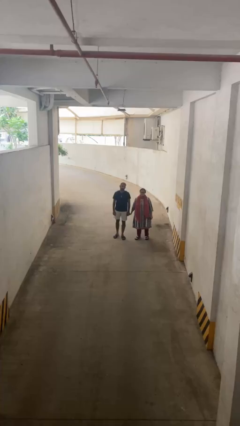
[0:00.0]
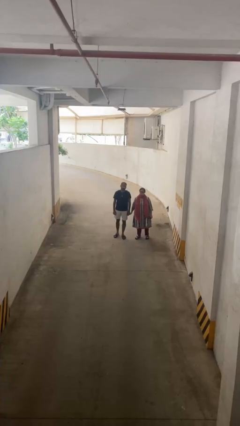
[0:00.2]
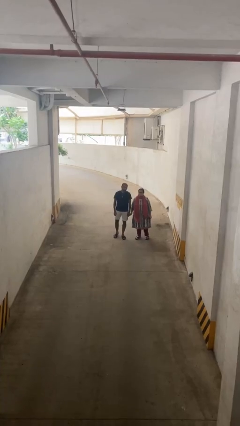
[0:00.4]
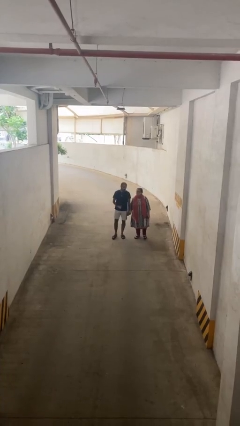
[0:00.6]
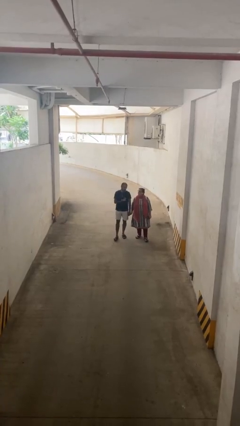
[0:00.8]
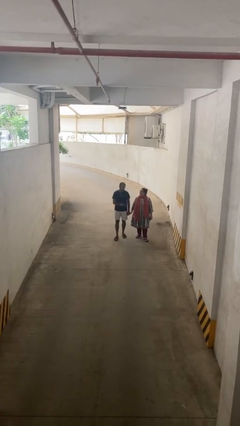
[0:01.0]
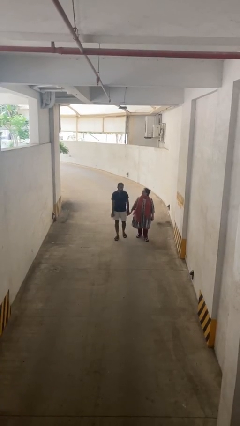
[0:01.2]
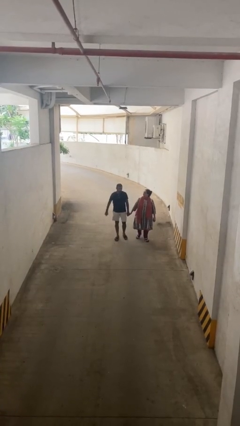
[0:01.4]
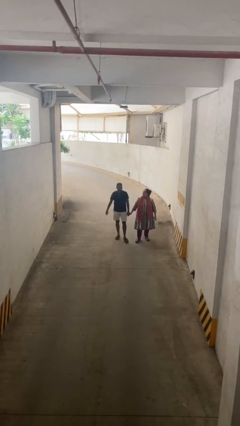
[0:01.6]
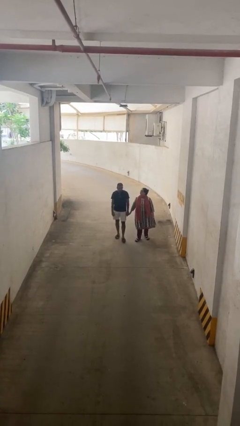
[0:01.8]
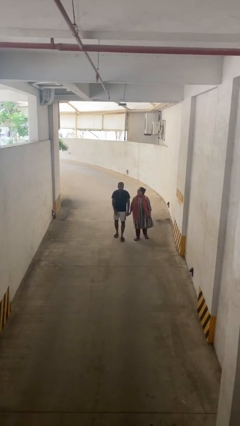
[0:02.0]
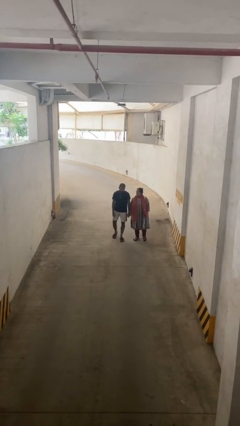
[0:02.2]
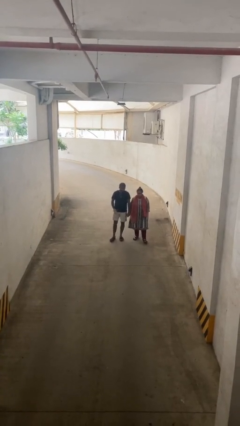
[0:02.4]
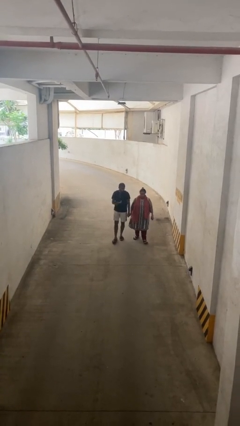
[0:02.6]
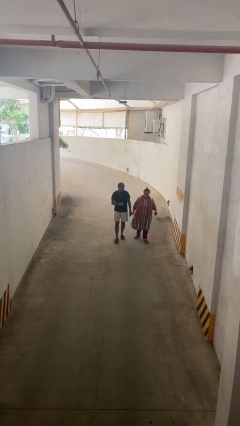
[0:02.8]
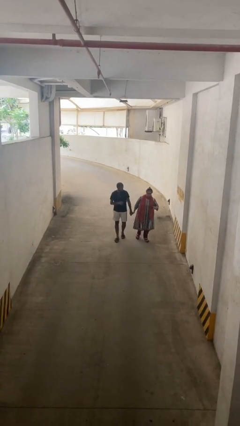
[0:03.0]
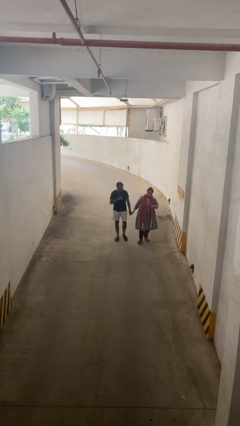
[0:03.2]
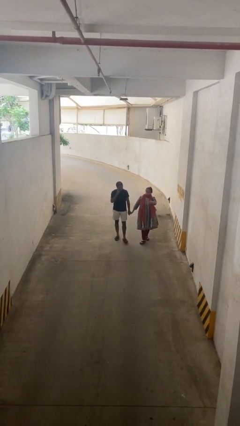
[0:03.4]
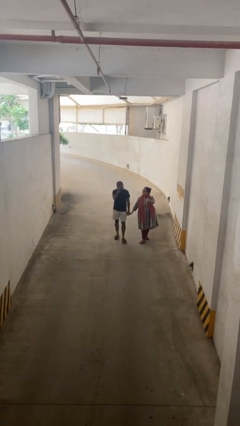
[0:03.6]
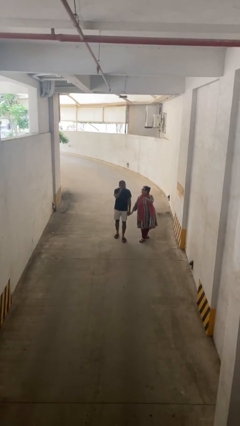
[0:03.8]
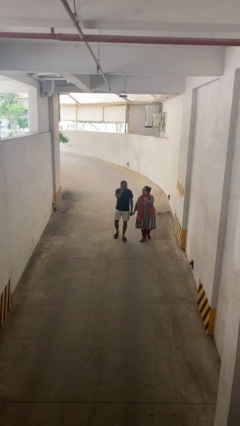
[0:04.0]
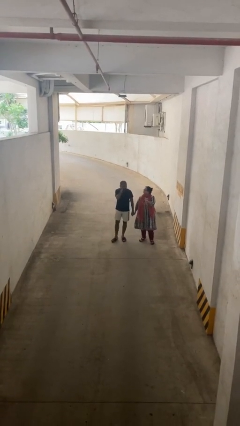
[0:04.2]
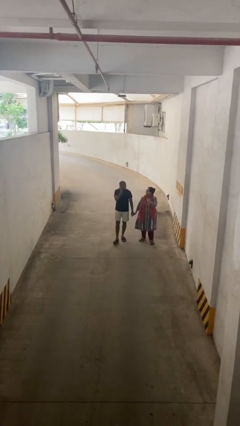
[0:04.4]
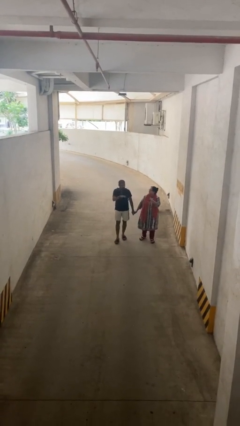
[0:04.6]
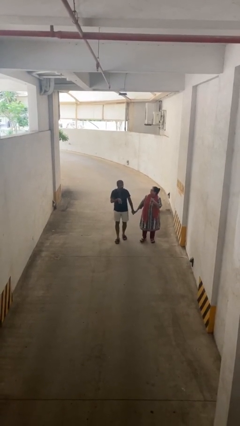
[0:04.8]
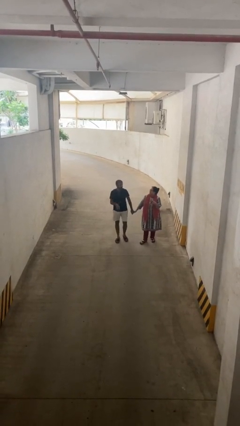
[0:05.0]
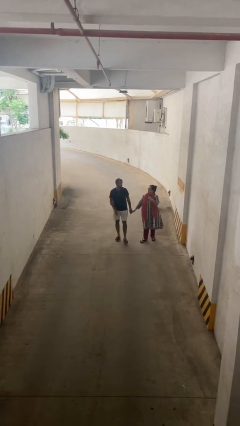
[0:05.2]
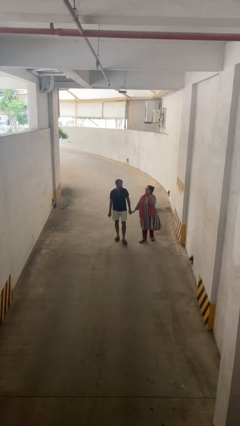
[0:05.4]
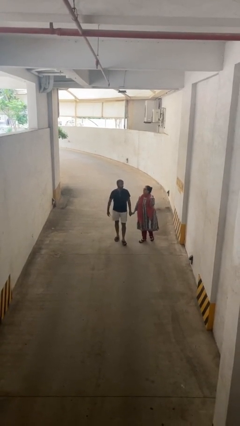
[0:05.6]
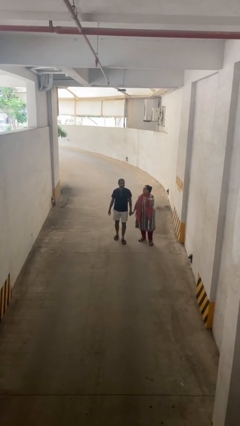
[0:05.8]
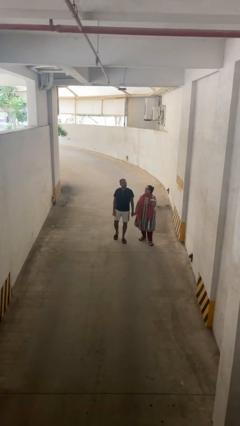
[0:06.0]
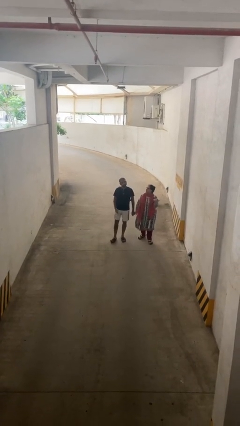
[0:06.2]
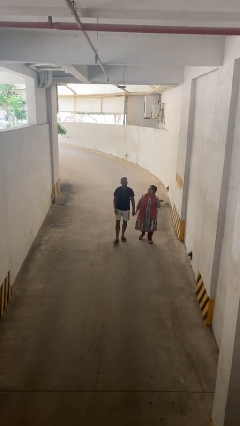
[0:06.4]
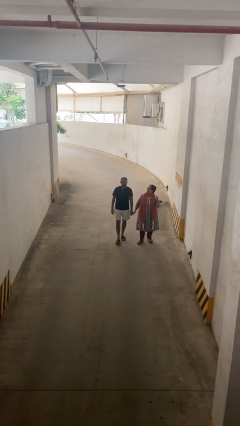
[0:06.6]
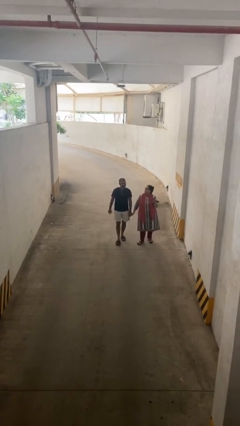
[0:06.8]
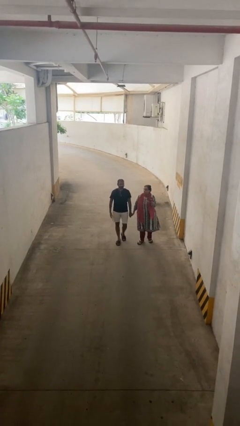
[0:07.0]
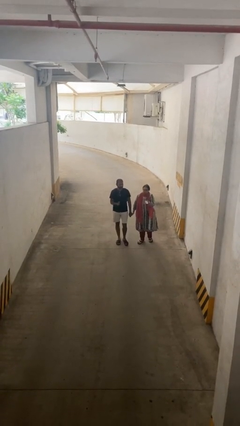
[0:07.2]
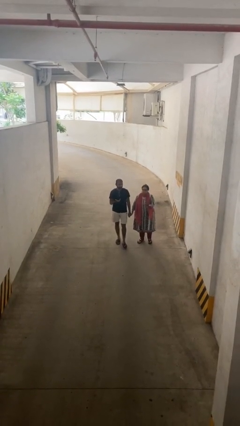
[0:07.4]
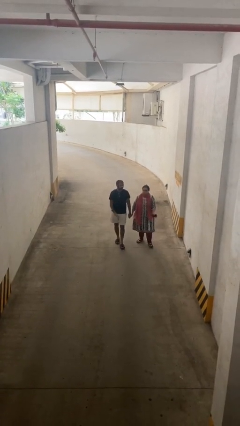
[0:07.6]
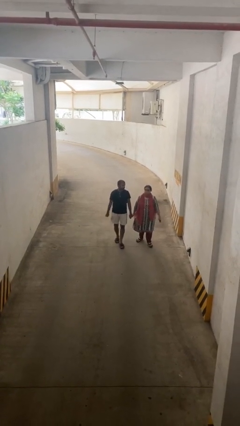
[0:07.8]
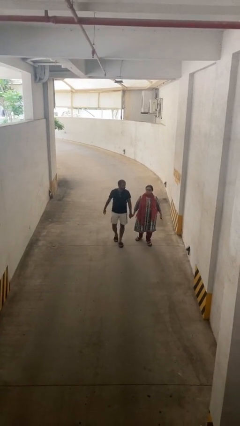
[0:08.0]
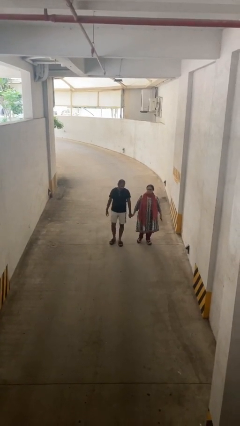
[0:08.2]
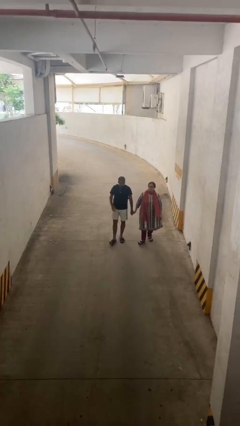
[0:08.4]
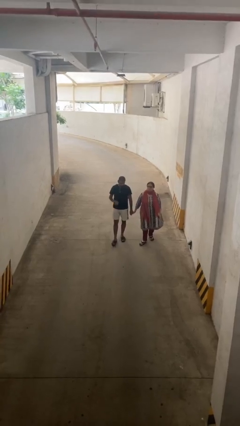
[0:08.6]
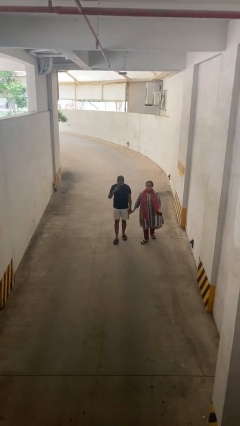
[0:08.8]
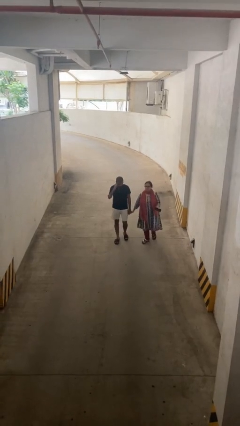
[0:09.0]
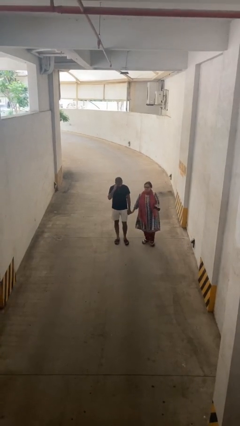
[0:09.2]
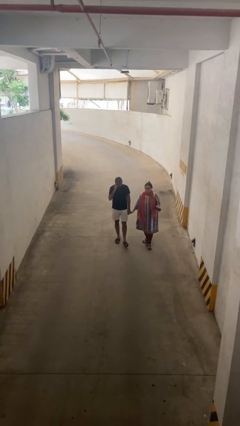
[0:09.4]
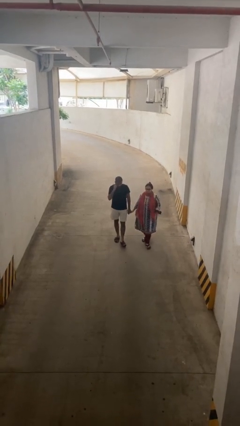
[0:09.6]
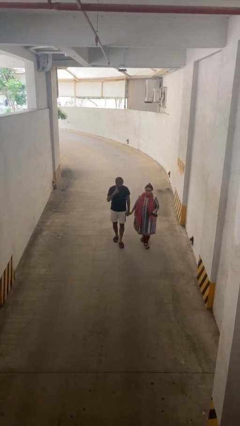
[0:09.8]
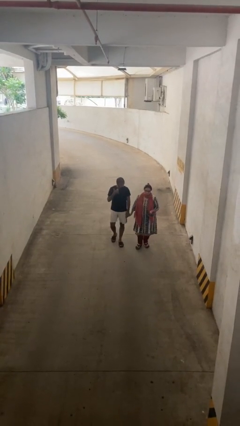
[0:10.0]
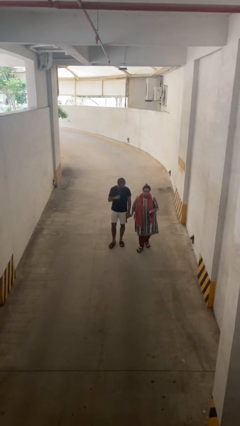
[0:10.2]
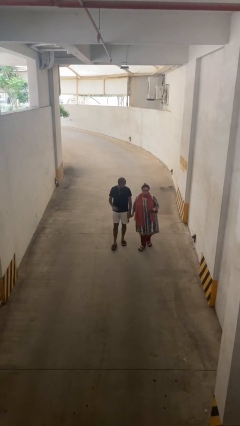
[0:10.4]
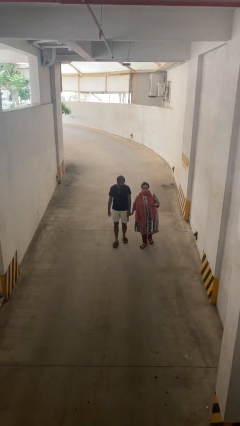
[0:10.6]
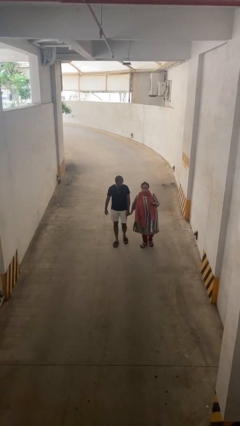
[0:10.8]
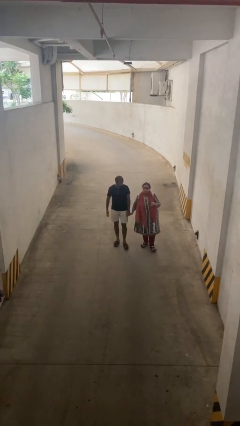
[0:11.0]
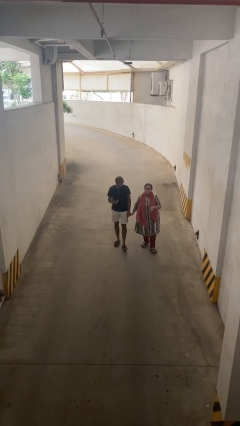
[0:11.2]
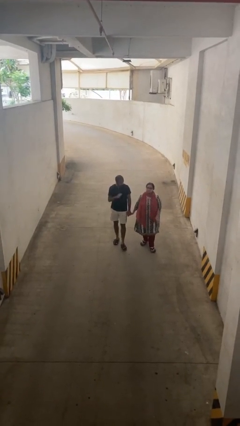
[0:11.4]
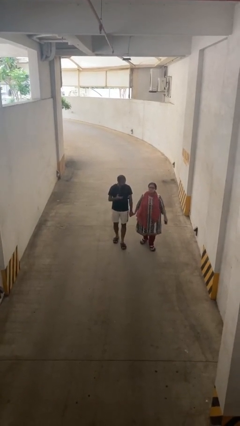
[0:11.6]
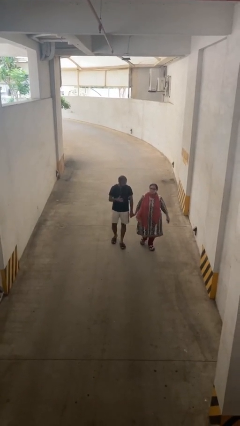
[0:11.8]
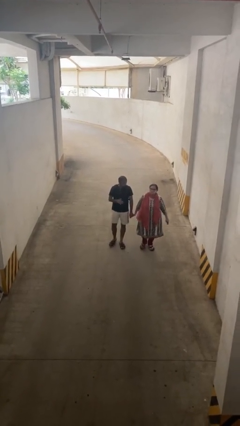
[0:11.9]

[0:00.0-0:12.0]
person holds hand

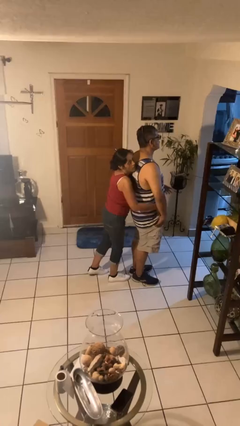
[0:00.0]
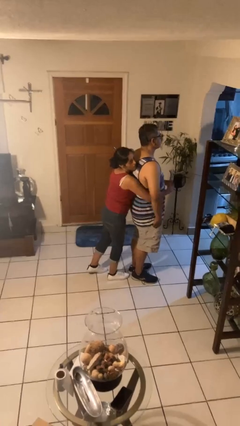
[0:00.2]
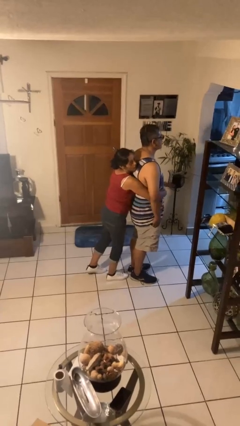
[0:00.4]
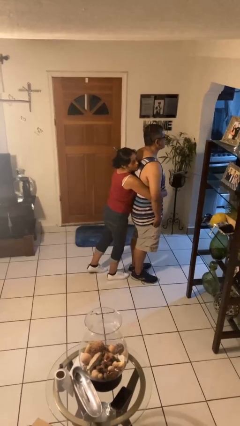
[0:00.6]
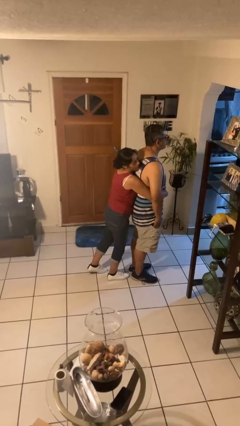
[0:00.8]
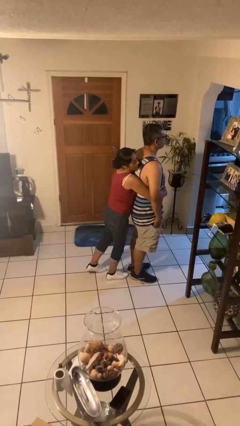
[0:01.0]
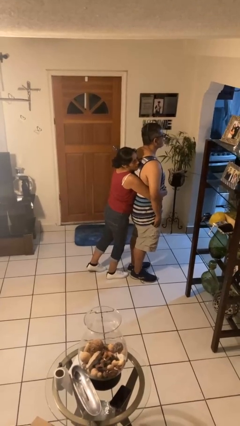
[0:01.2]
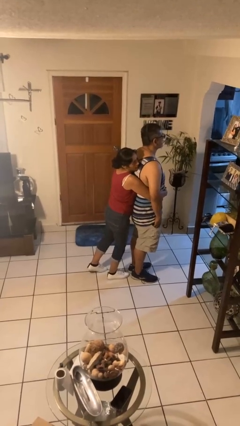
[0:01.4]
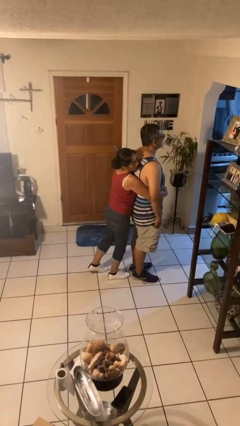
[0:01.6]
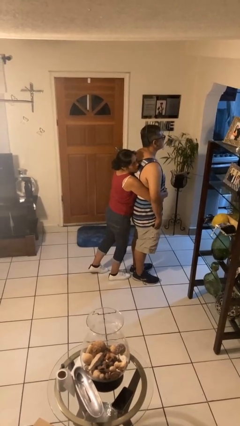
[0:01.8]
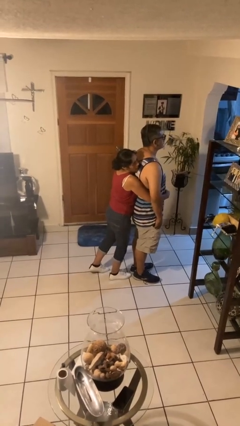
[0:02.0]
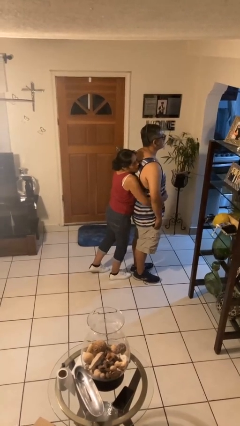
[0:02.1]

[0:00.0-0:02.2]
person hugs person from behind

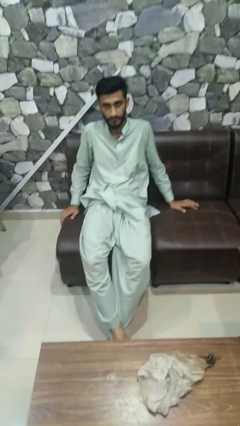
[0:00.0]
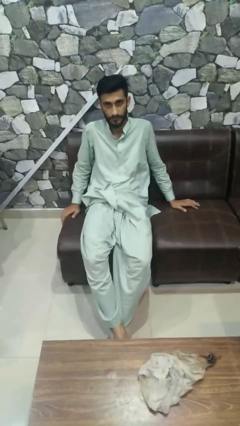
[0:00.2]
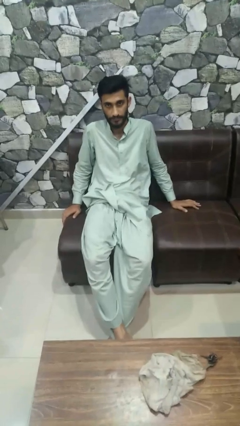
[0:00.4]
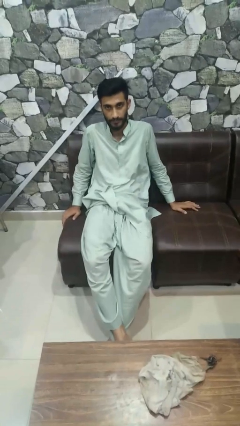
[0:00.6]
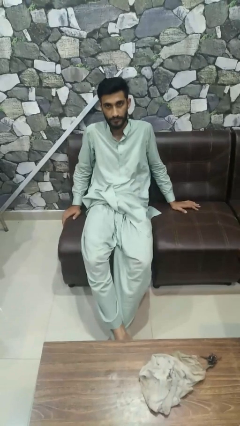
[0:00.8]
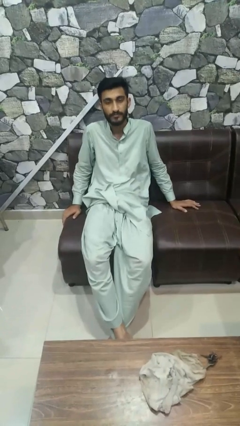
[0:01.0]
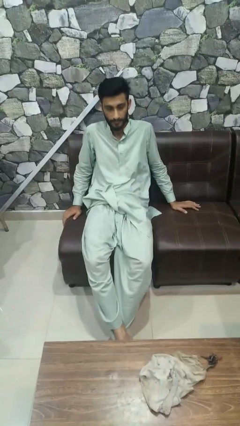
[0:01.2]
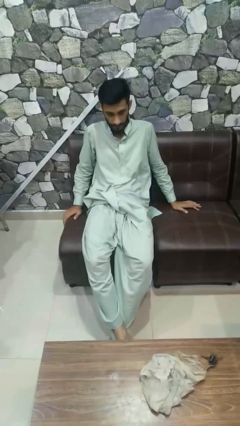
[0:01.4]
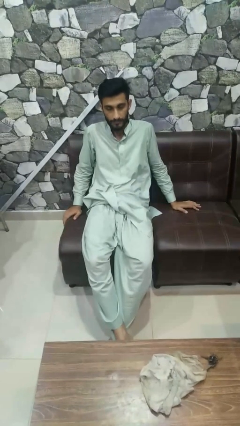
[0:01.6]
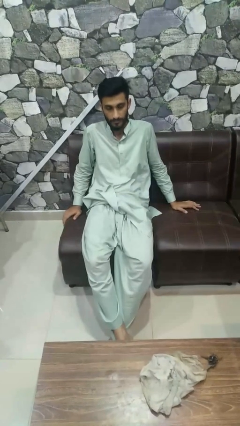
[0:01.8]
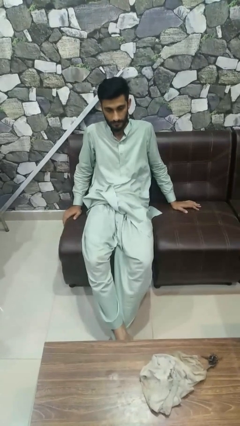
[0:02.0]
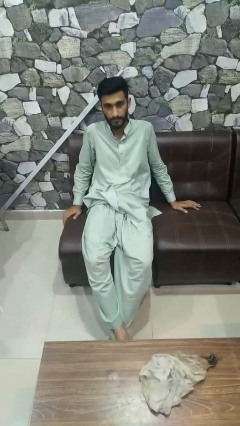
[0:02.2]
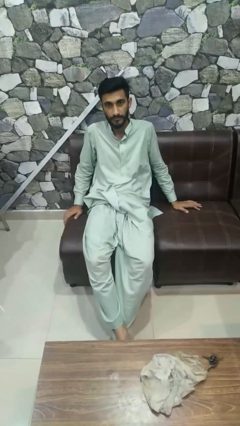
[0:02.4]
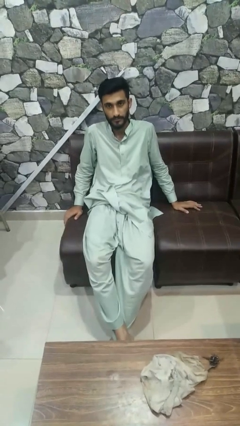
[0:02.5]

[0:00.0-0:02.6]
person nods head

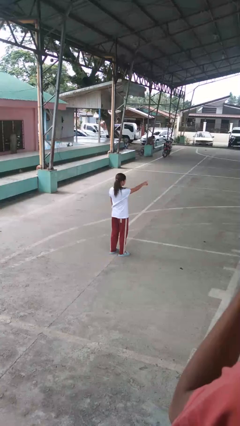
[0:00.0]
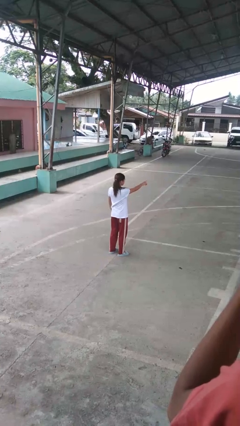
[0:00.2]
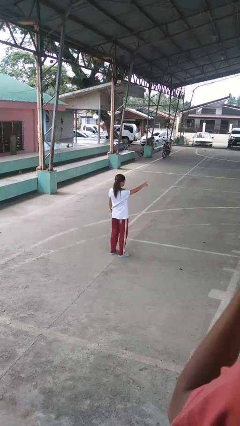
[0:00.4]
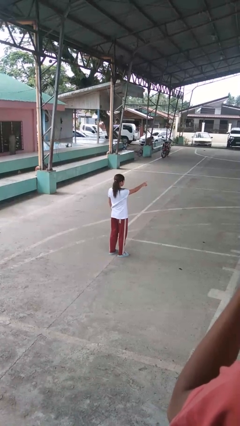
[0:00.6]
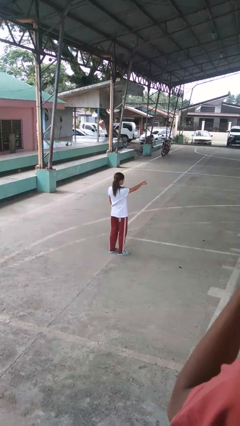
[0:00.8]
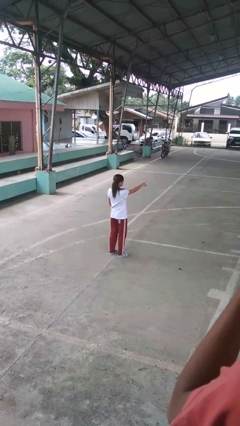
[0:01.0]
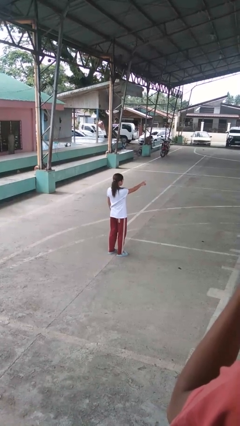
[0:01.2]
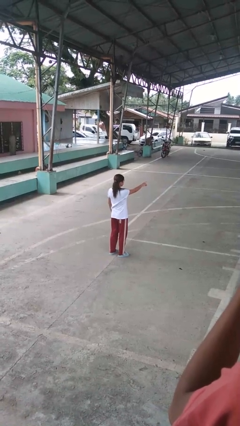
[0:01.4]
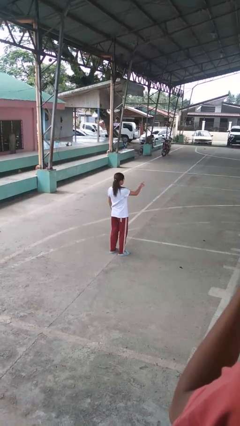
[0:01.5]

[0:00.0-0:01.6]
person points at person
